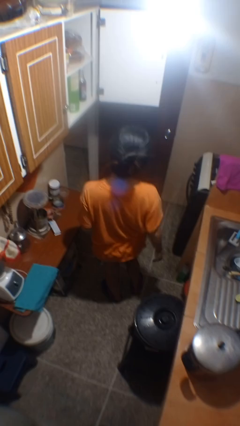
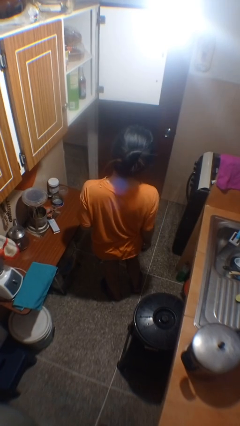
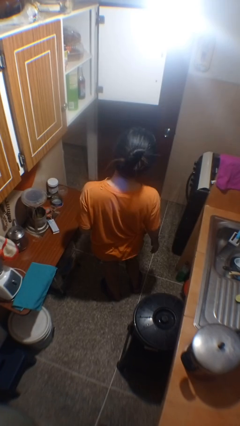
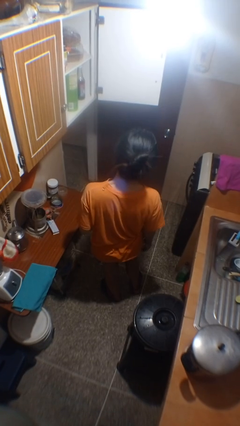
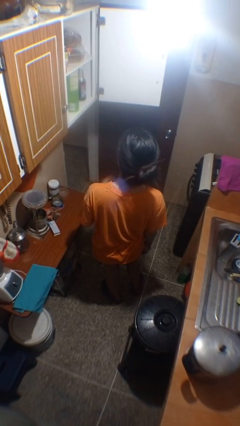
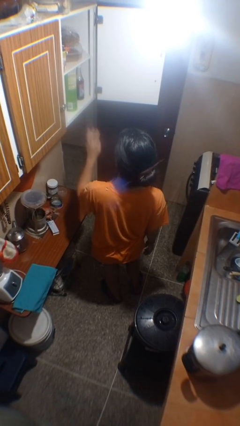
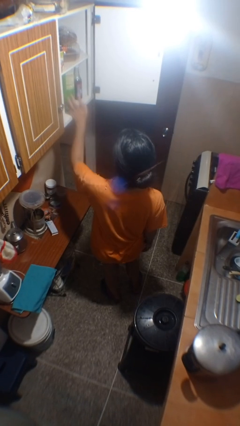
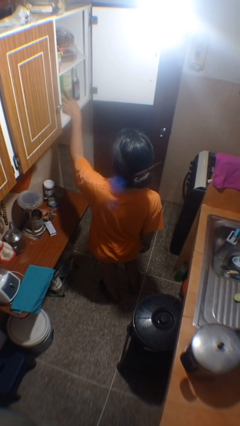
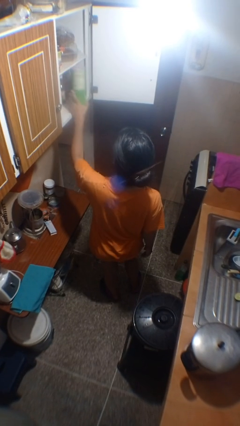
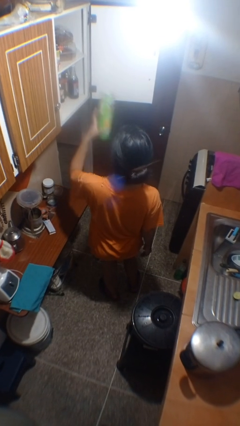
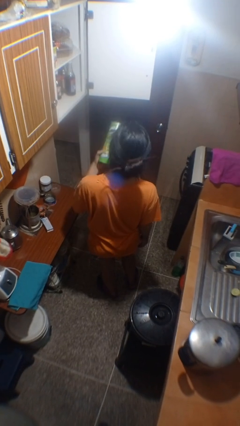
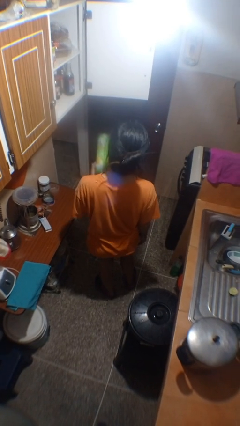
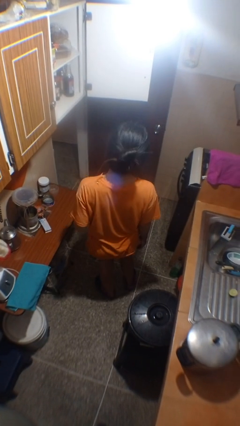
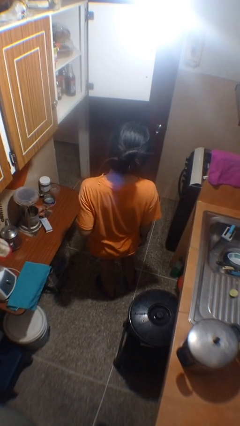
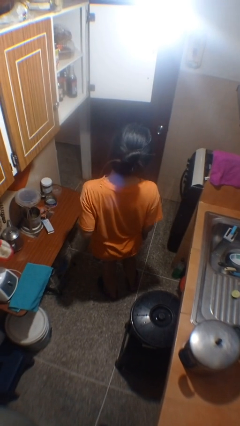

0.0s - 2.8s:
person takes object from cabinet

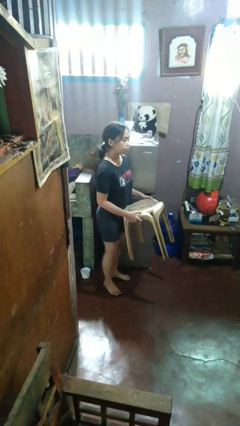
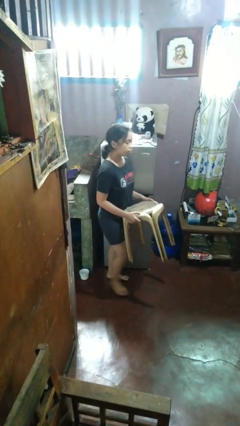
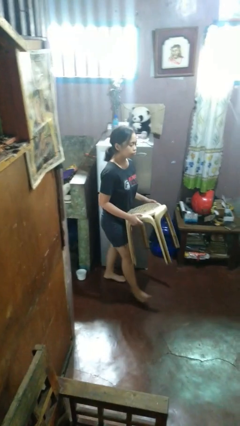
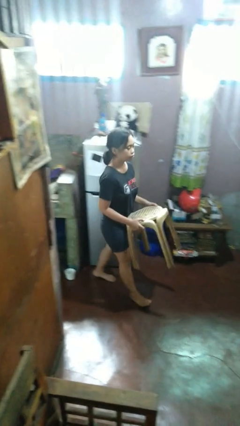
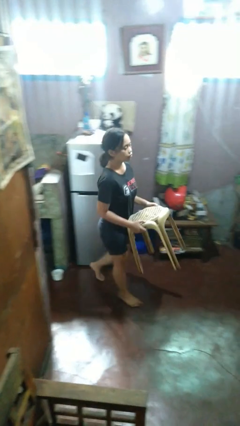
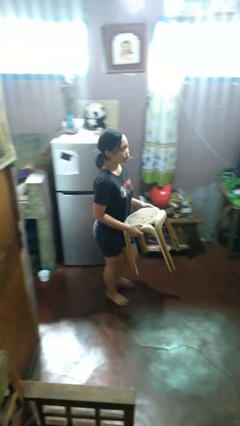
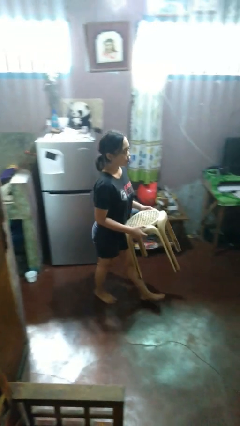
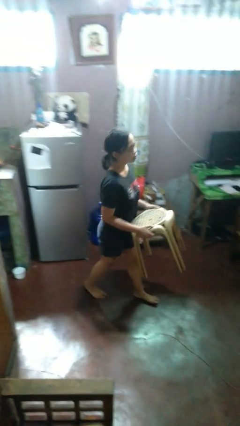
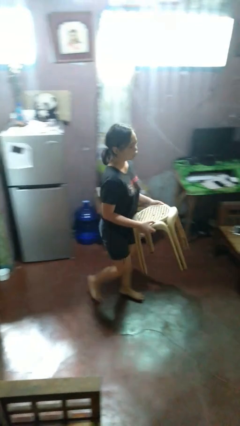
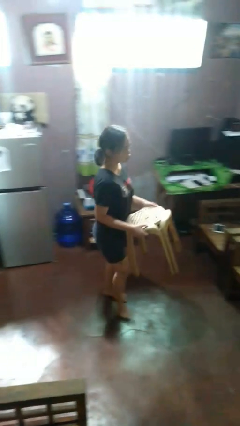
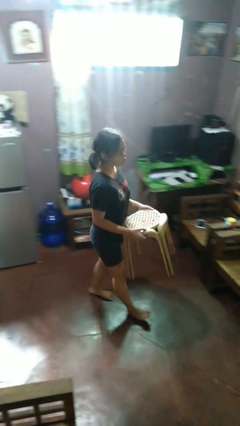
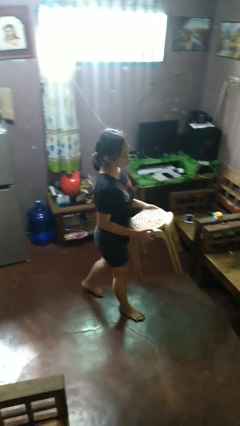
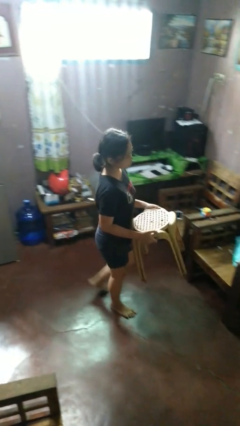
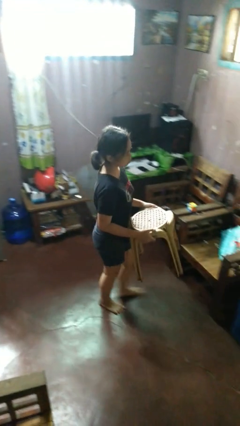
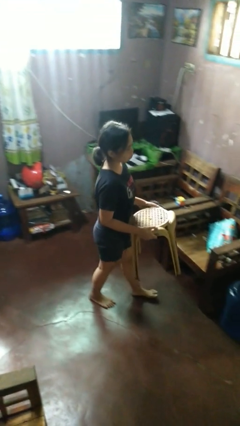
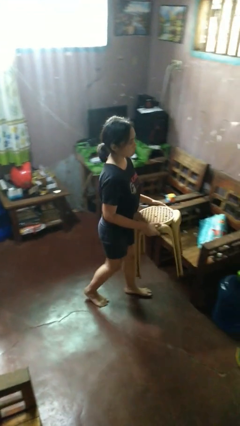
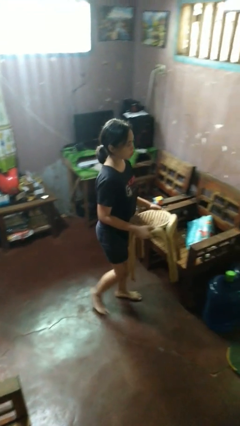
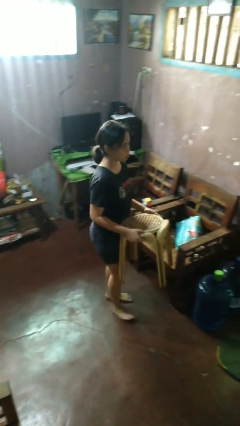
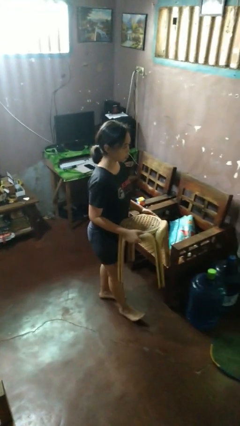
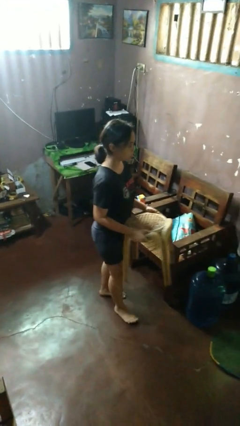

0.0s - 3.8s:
person carries furniture

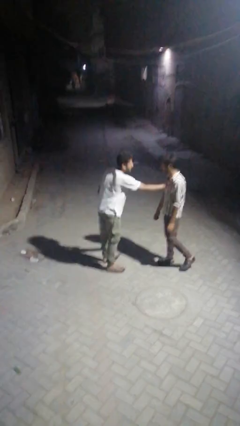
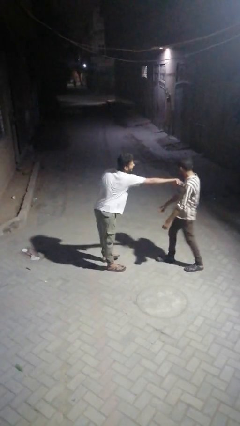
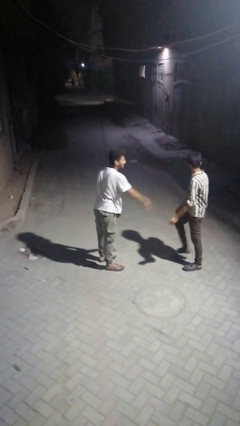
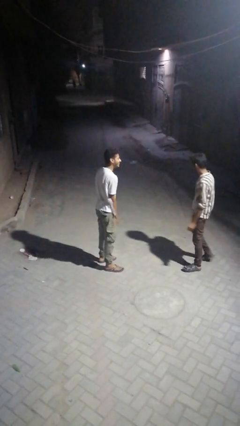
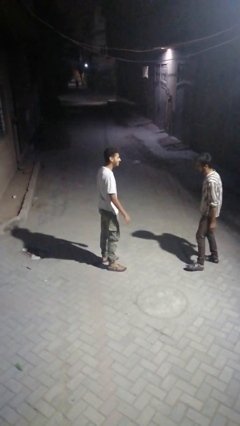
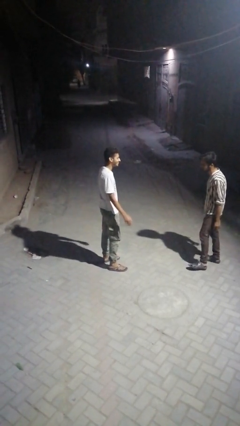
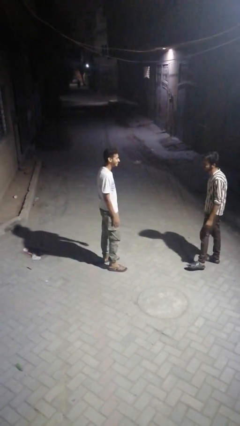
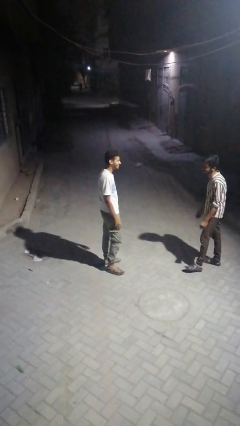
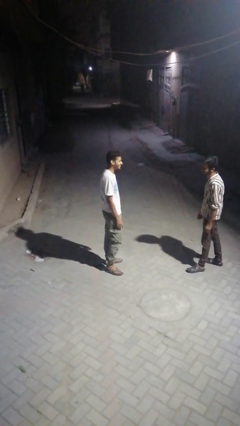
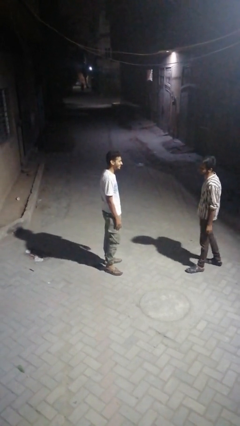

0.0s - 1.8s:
person shoves person

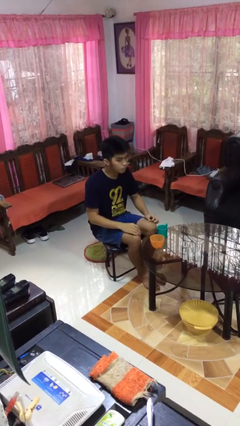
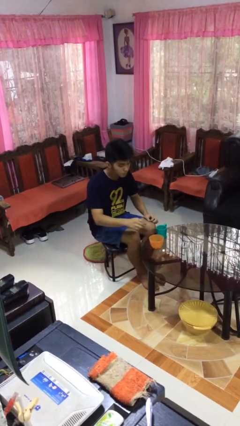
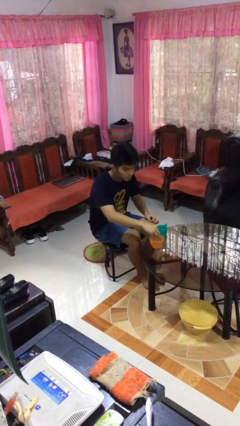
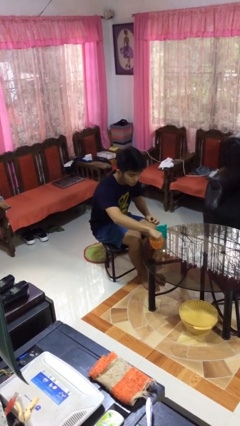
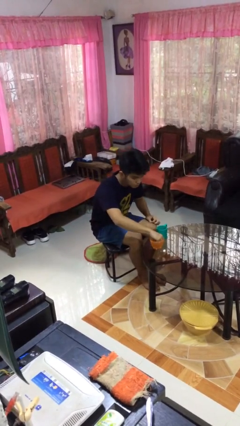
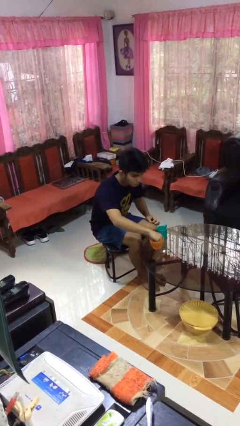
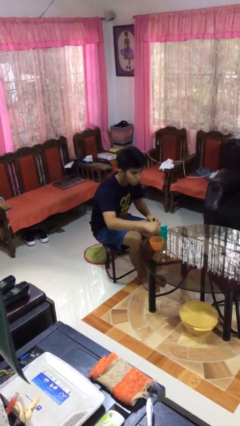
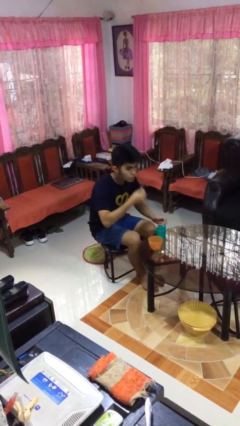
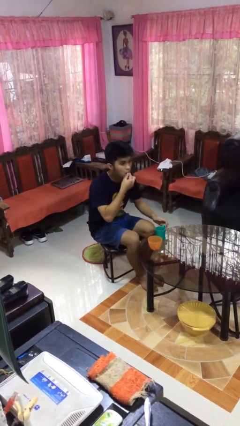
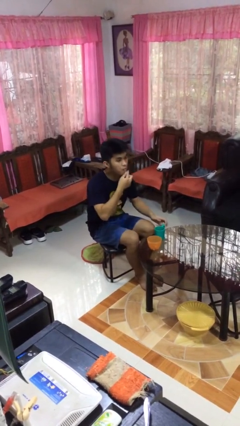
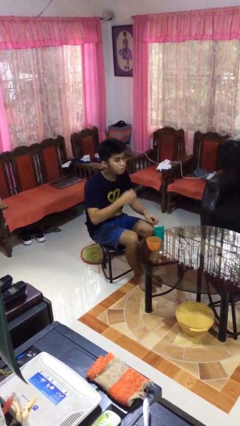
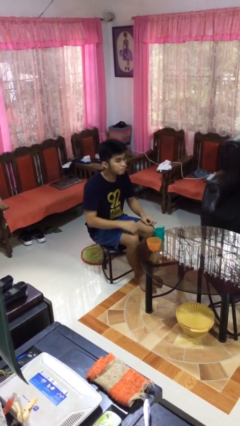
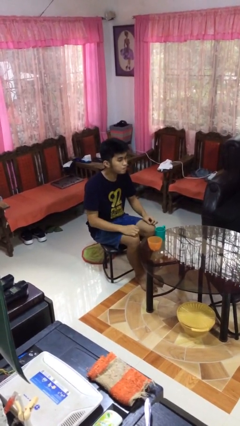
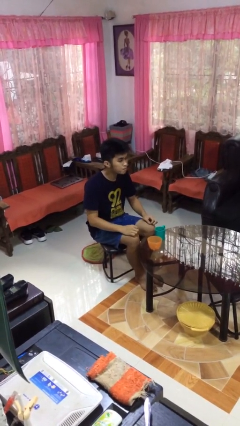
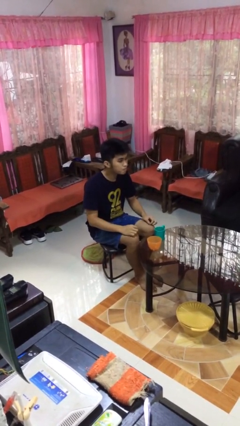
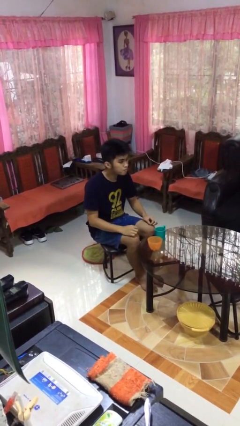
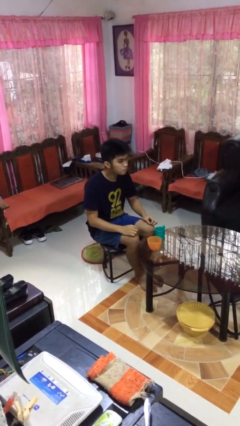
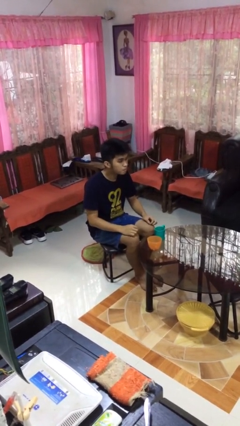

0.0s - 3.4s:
person takes medicine pills

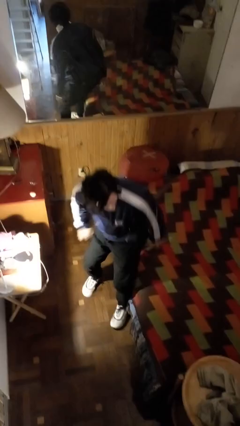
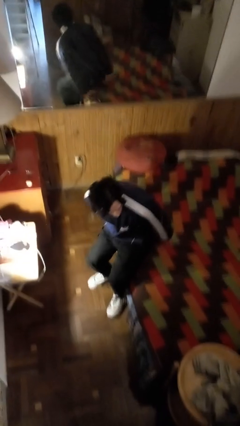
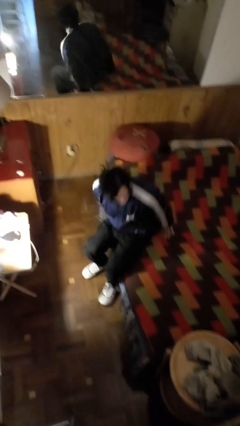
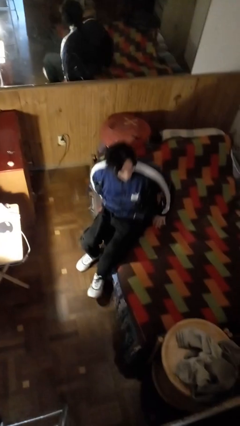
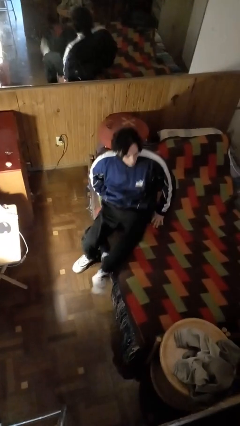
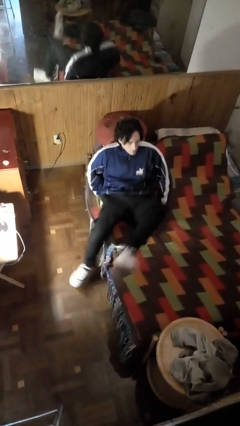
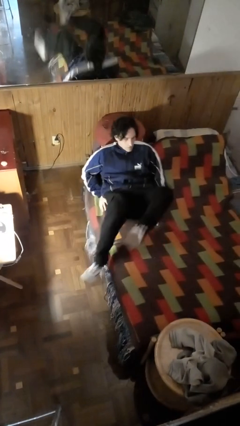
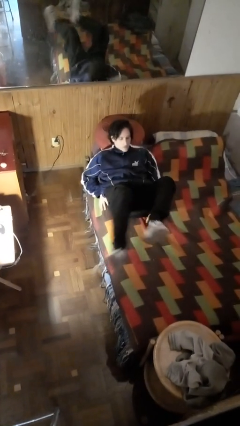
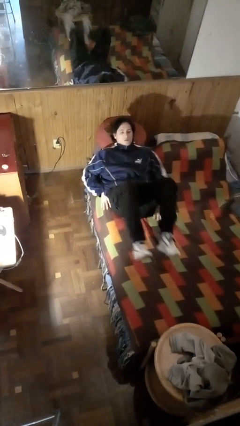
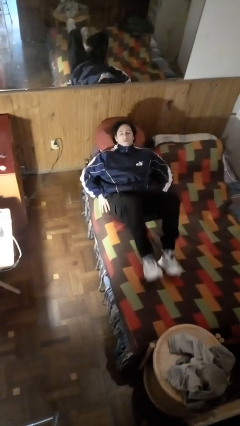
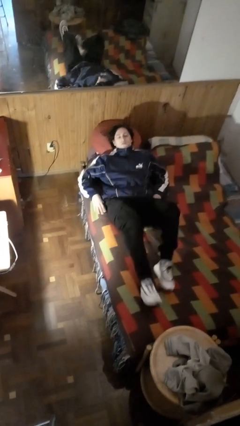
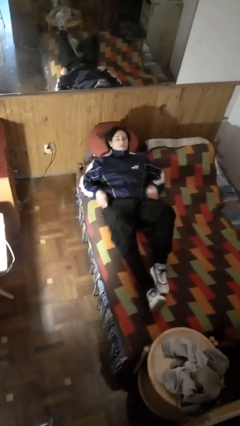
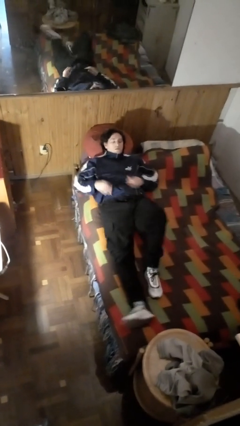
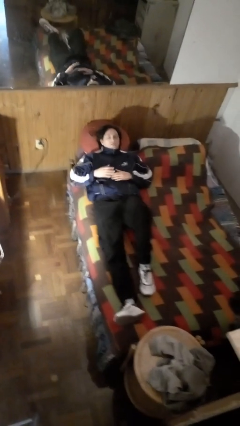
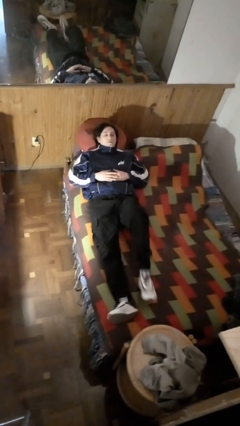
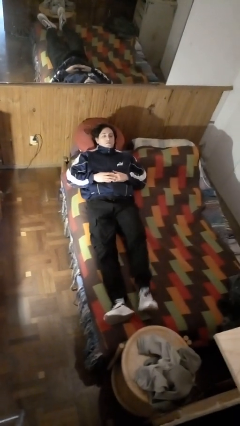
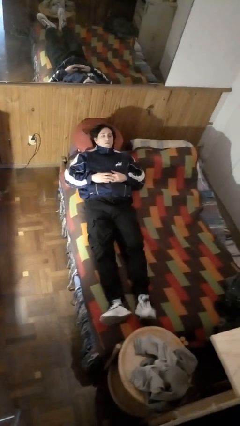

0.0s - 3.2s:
person lies down on bed

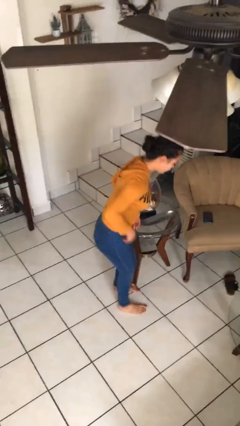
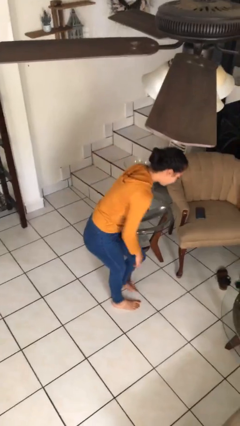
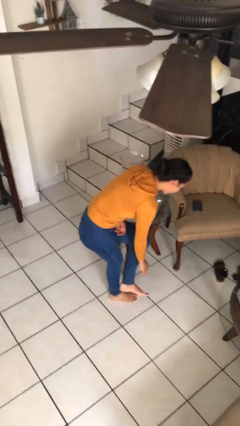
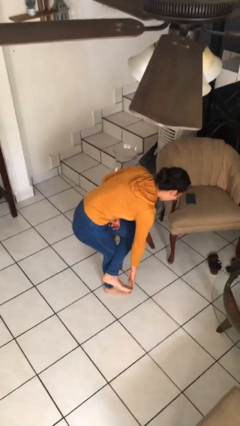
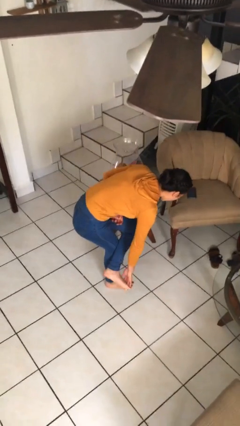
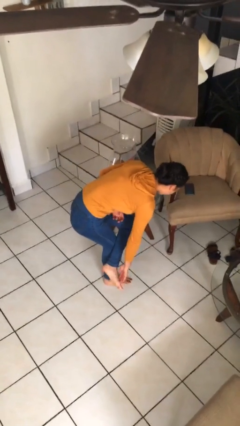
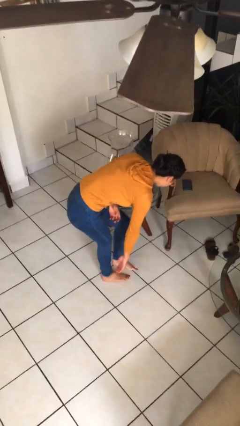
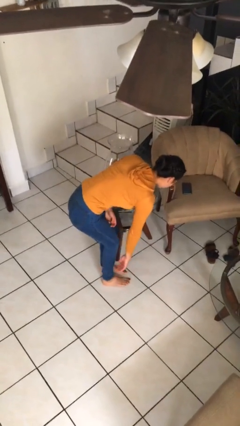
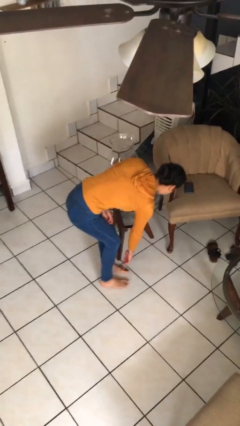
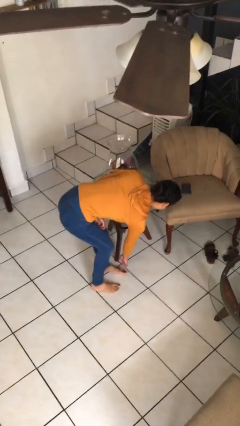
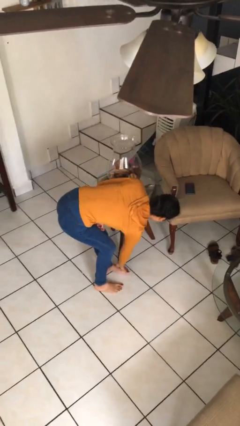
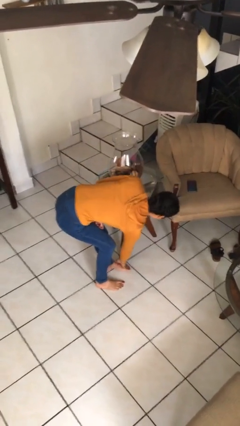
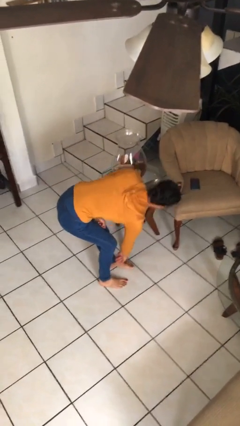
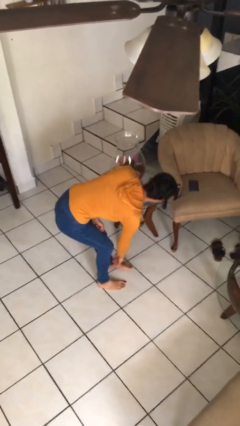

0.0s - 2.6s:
person stubs toe
